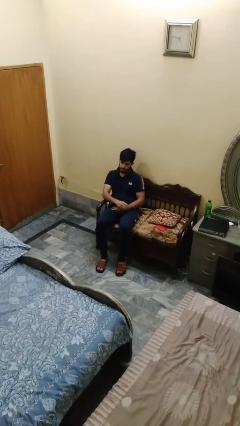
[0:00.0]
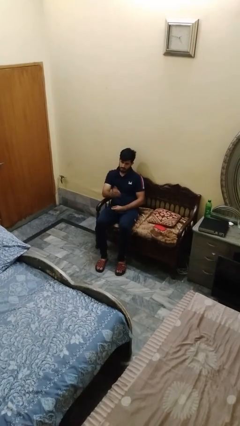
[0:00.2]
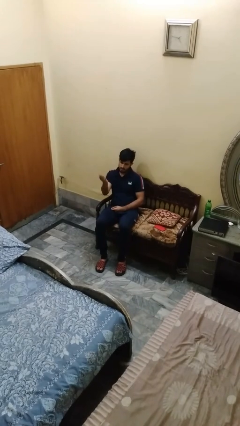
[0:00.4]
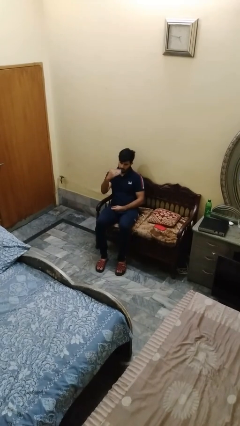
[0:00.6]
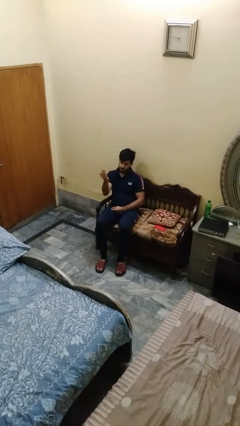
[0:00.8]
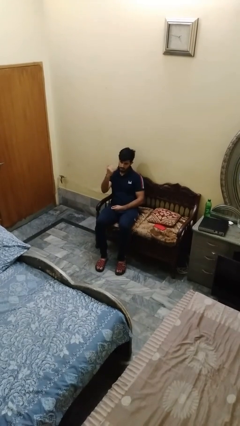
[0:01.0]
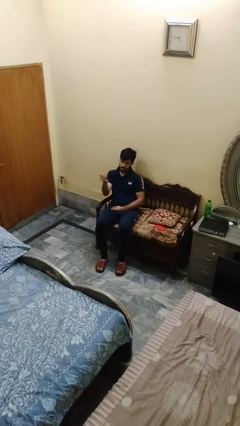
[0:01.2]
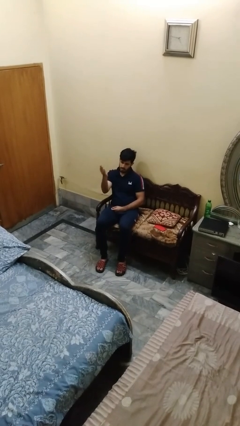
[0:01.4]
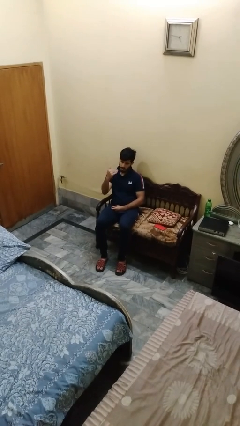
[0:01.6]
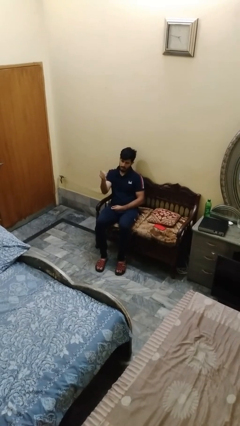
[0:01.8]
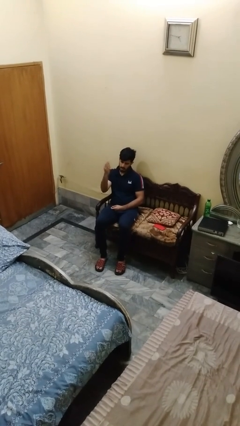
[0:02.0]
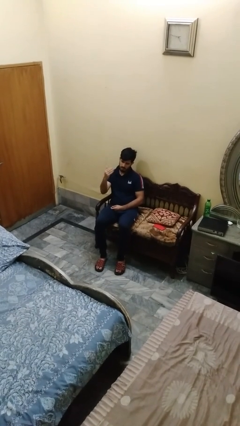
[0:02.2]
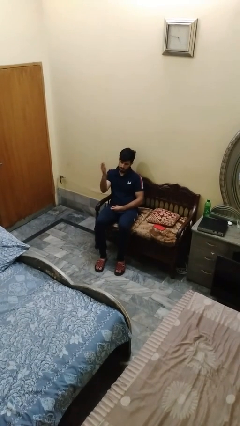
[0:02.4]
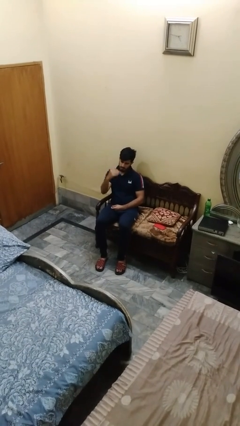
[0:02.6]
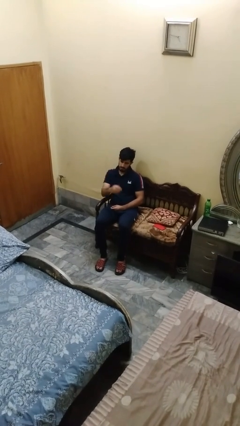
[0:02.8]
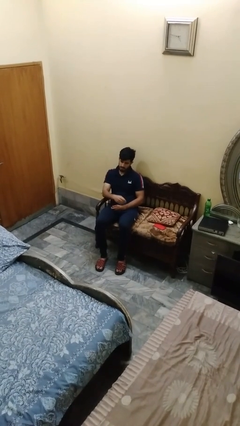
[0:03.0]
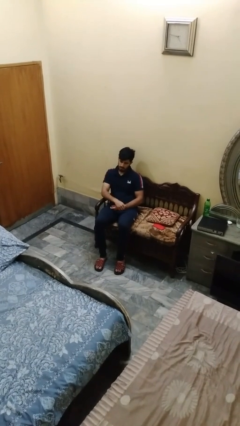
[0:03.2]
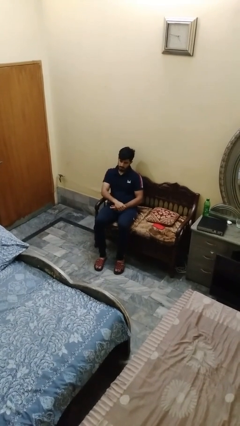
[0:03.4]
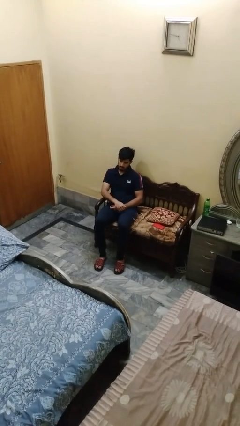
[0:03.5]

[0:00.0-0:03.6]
person gestures come here

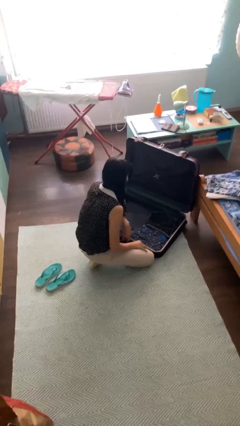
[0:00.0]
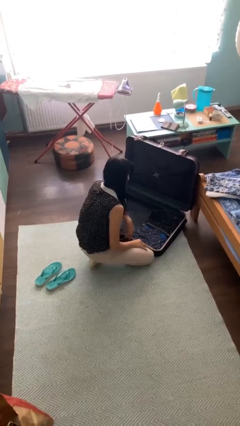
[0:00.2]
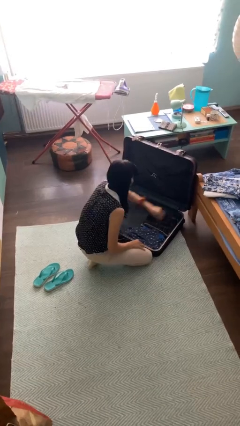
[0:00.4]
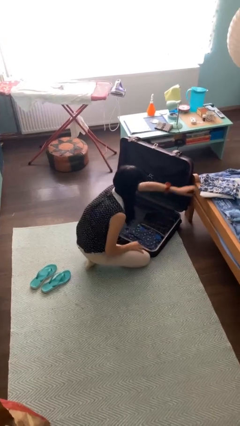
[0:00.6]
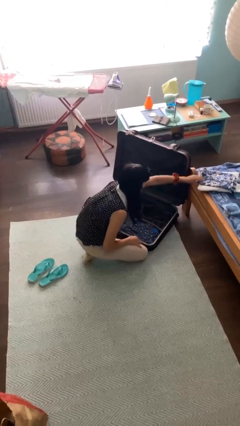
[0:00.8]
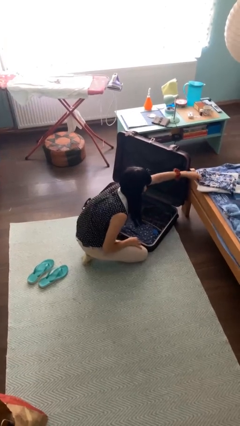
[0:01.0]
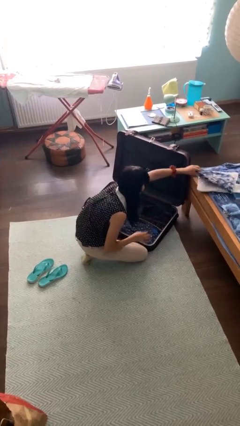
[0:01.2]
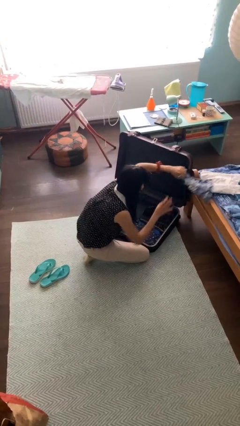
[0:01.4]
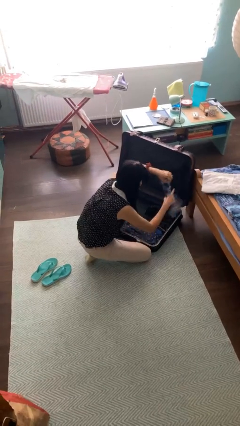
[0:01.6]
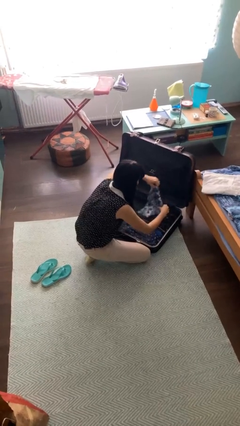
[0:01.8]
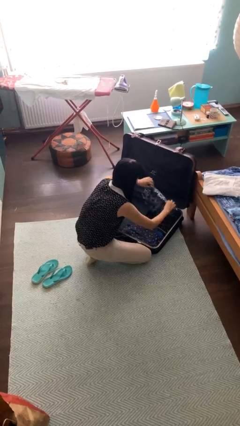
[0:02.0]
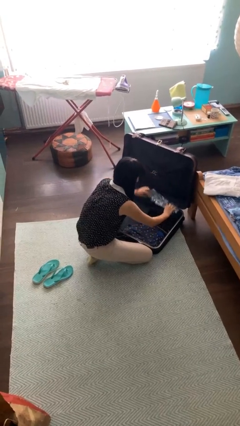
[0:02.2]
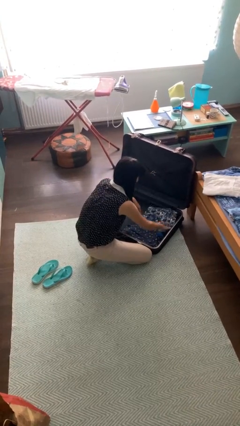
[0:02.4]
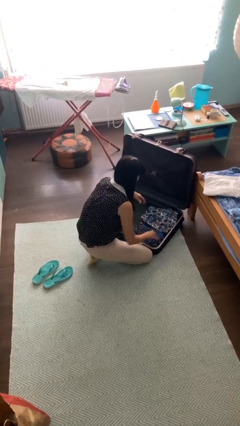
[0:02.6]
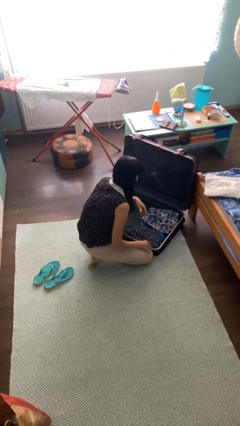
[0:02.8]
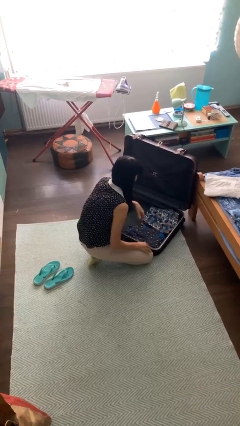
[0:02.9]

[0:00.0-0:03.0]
person loads clothes into suitcase

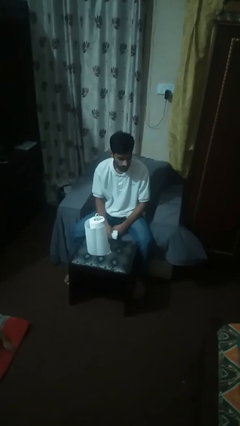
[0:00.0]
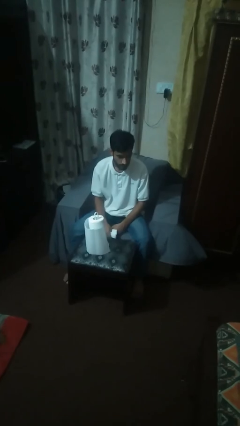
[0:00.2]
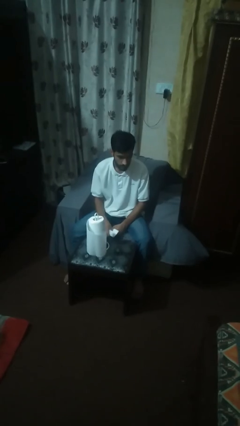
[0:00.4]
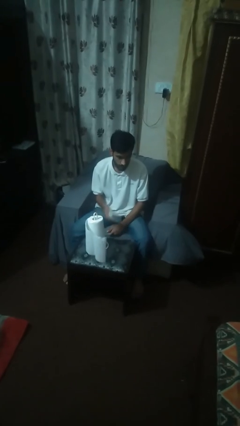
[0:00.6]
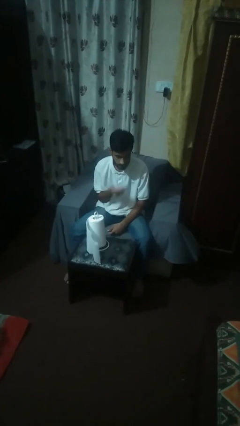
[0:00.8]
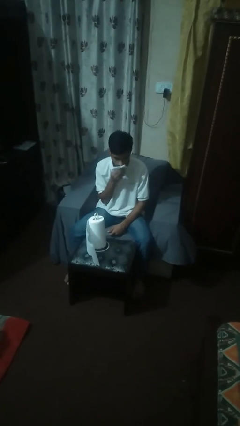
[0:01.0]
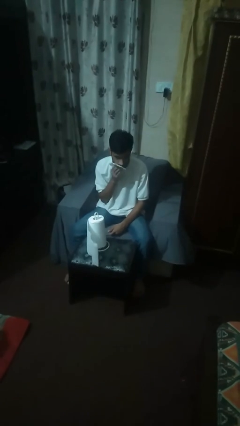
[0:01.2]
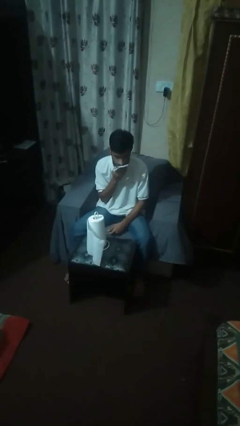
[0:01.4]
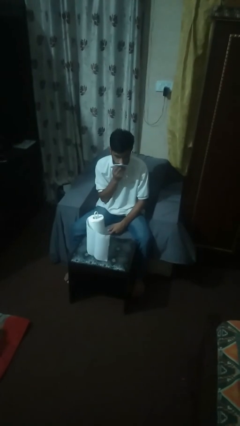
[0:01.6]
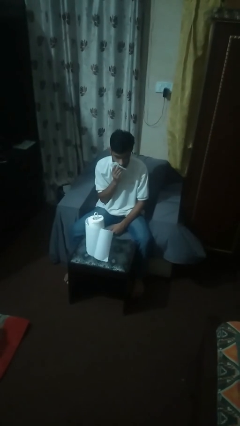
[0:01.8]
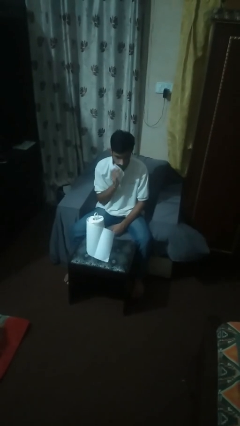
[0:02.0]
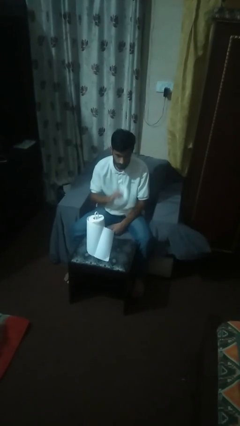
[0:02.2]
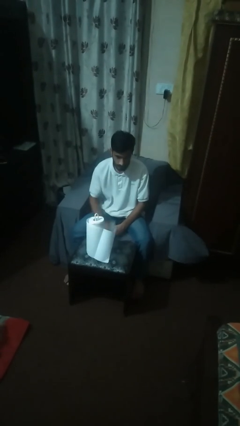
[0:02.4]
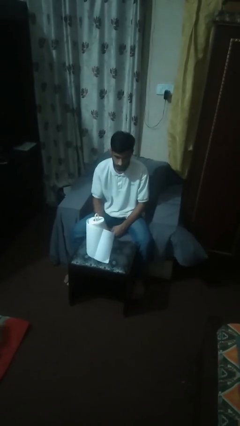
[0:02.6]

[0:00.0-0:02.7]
person wipes mouth with napkin

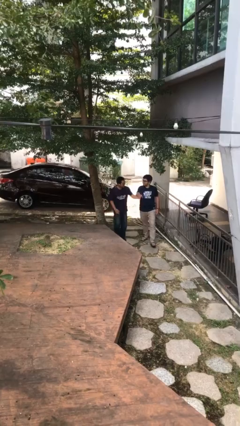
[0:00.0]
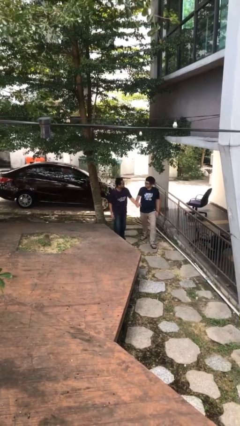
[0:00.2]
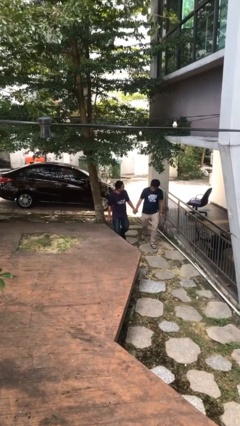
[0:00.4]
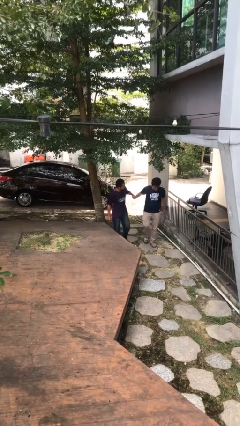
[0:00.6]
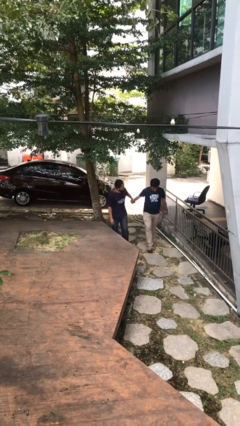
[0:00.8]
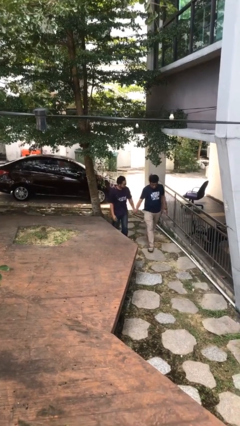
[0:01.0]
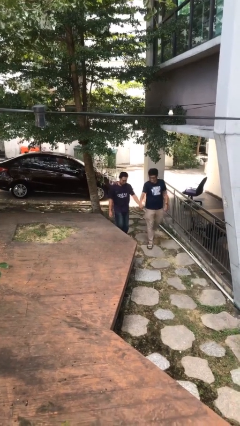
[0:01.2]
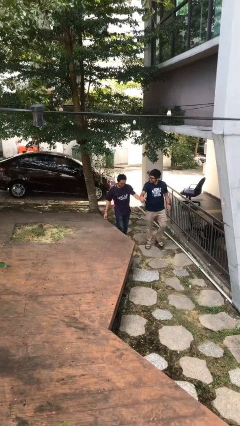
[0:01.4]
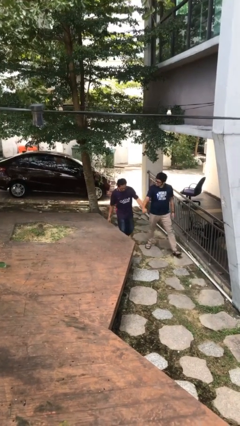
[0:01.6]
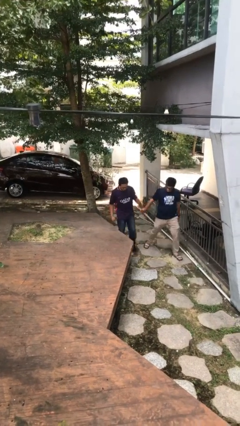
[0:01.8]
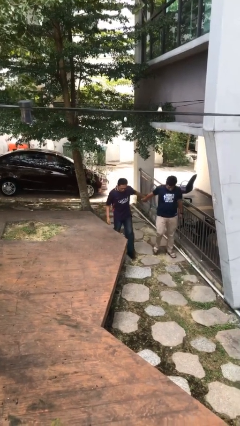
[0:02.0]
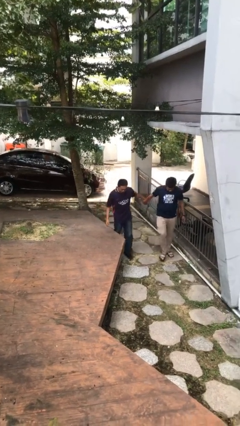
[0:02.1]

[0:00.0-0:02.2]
person holds hand

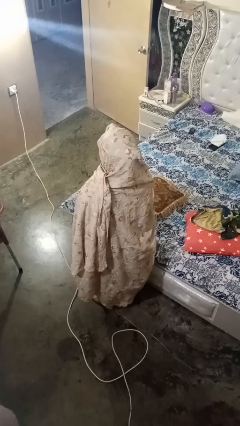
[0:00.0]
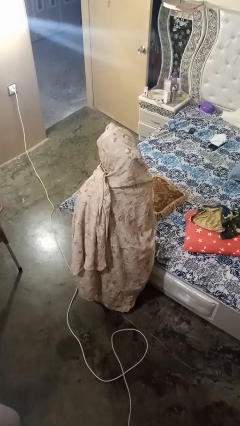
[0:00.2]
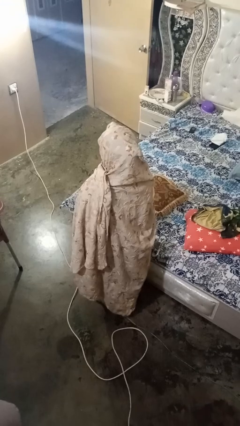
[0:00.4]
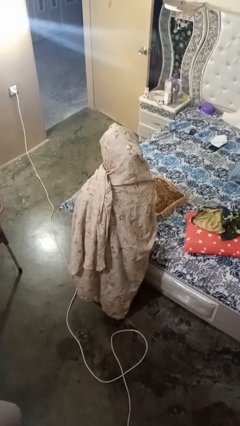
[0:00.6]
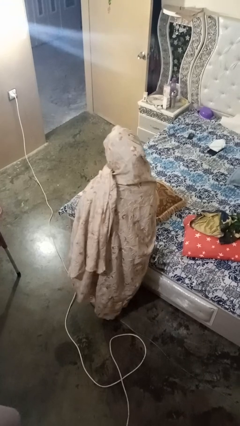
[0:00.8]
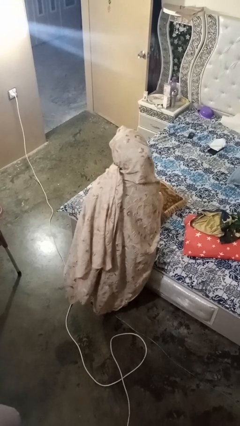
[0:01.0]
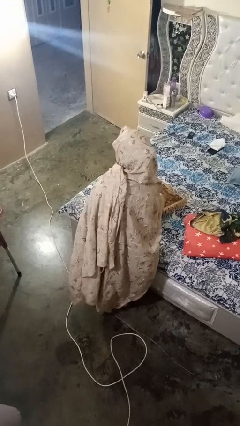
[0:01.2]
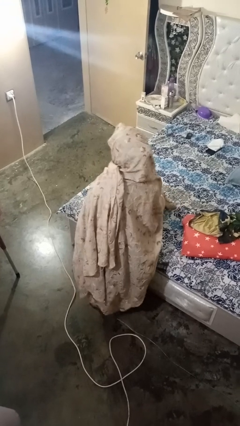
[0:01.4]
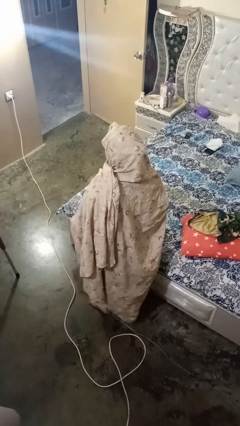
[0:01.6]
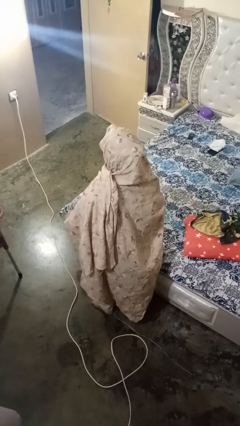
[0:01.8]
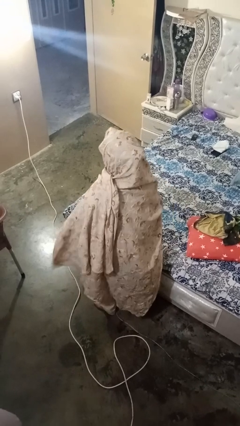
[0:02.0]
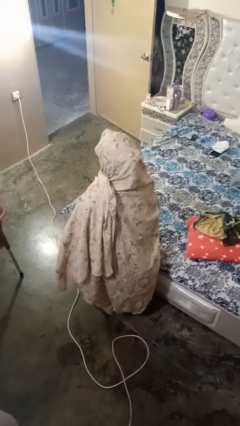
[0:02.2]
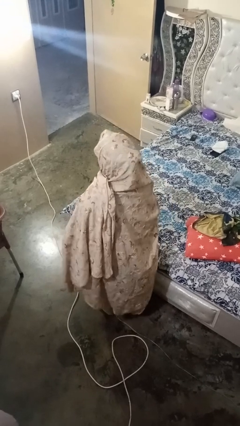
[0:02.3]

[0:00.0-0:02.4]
person picks up object from bed

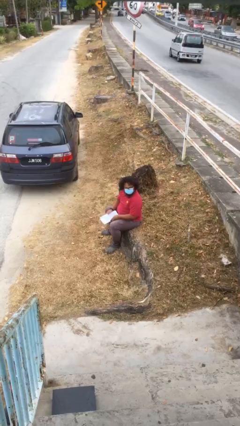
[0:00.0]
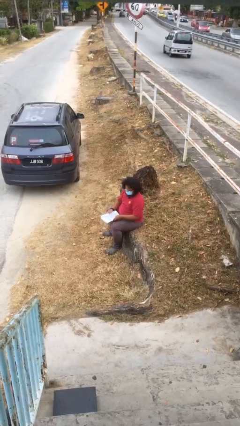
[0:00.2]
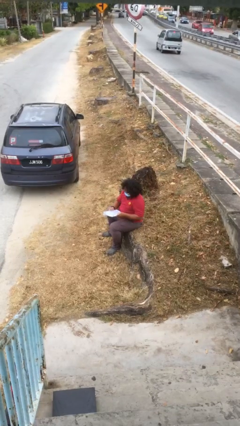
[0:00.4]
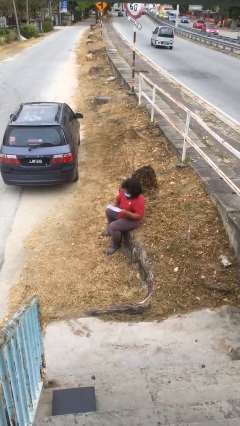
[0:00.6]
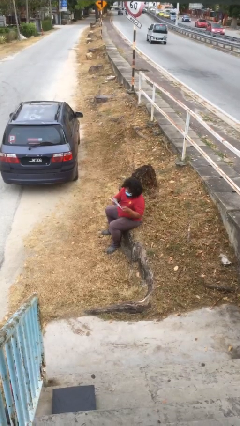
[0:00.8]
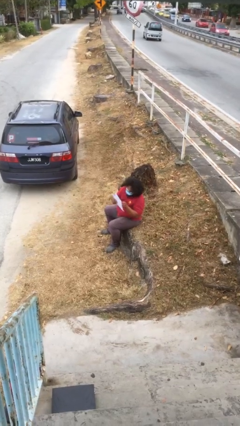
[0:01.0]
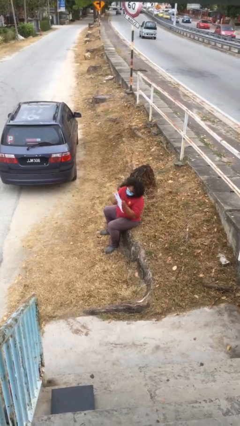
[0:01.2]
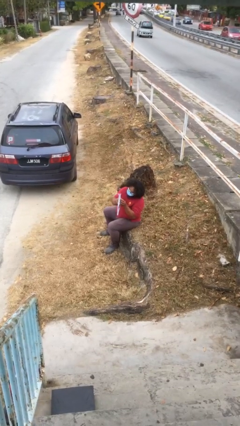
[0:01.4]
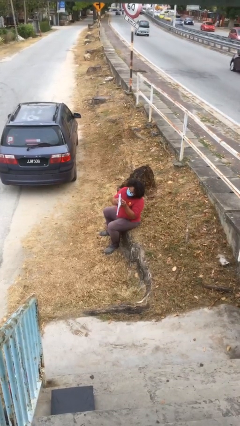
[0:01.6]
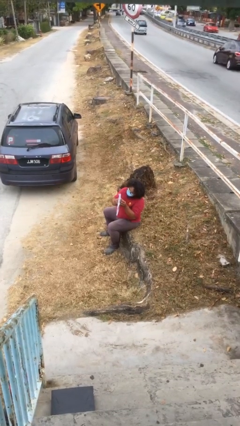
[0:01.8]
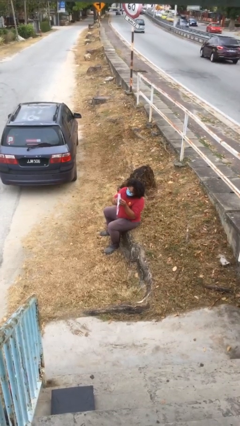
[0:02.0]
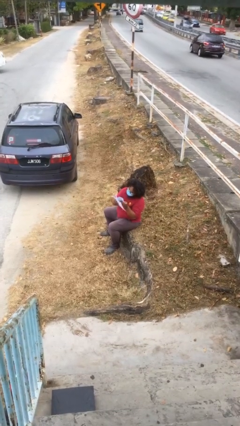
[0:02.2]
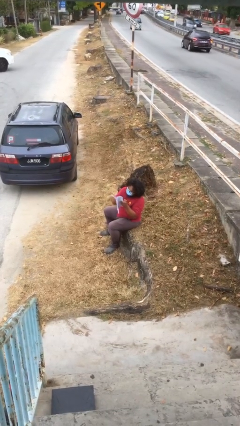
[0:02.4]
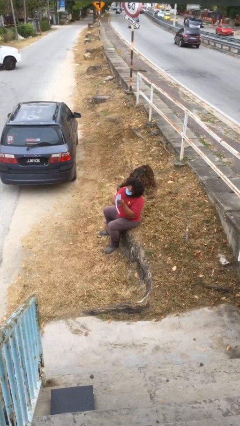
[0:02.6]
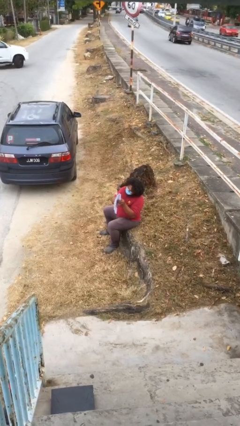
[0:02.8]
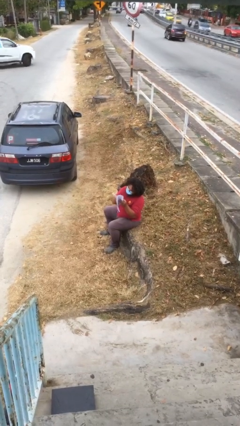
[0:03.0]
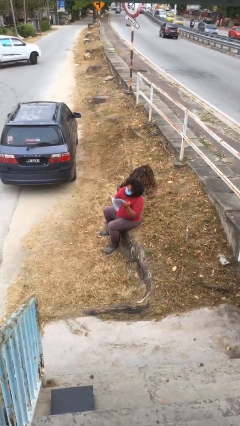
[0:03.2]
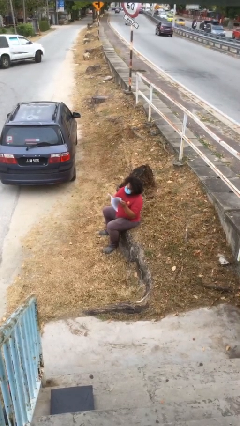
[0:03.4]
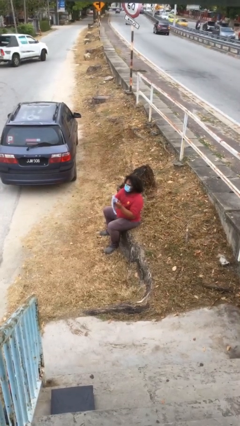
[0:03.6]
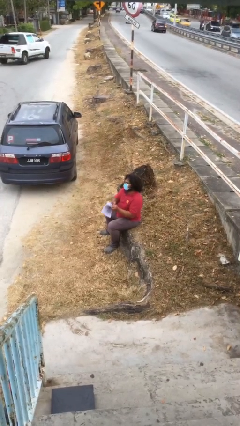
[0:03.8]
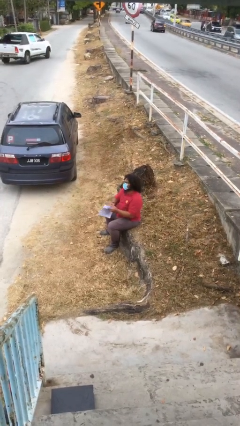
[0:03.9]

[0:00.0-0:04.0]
person reads document
